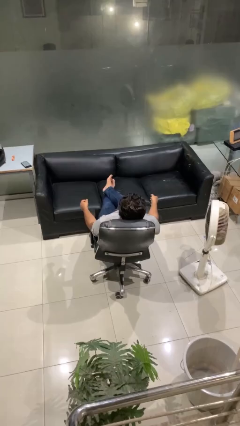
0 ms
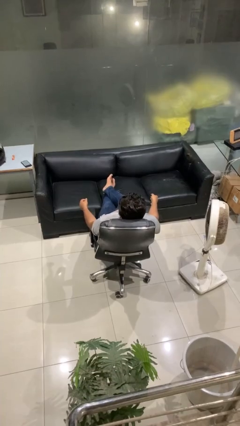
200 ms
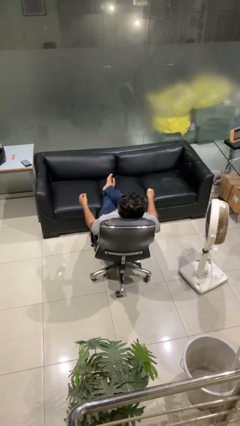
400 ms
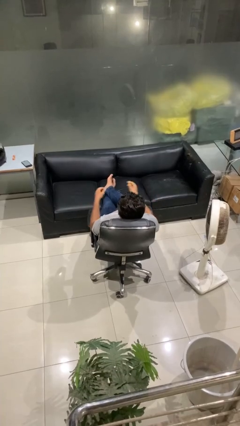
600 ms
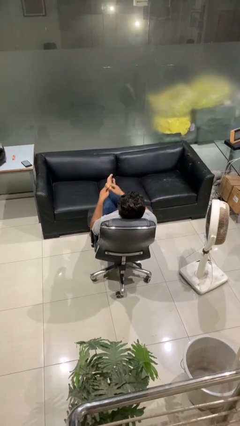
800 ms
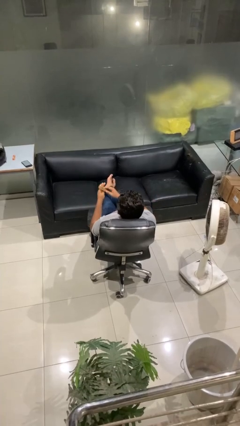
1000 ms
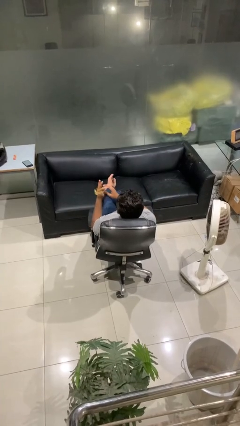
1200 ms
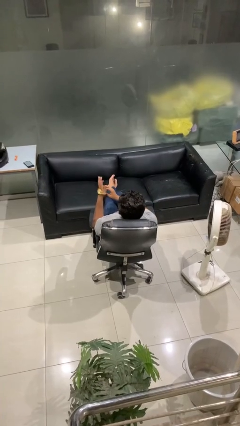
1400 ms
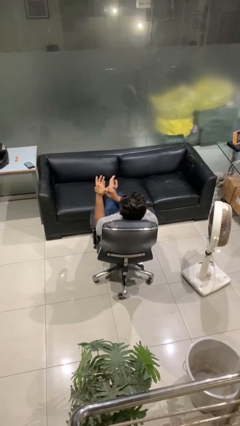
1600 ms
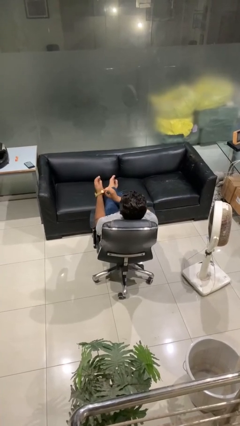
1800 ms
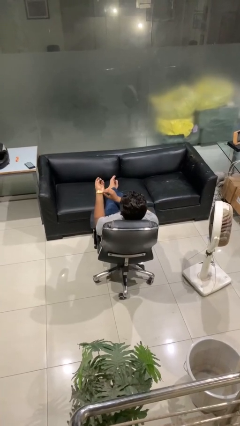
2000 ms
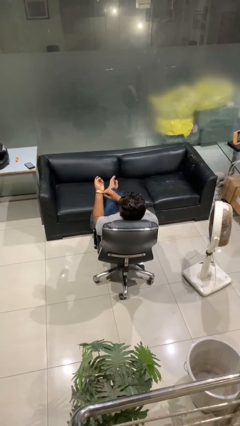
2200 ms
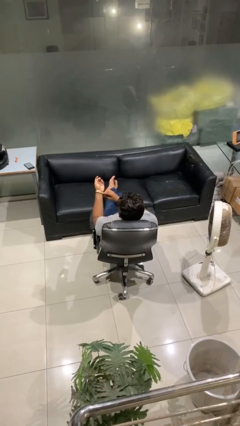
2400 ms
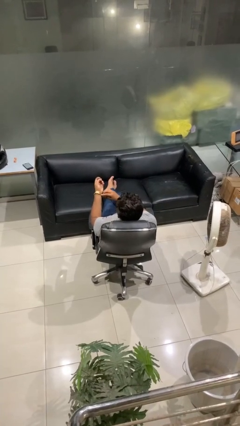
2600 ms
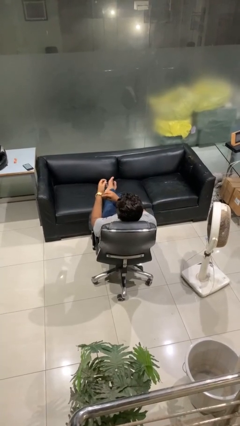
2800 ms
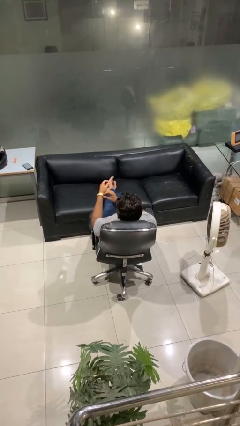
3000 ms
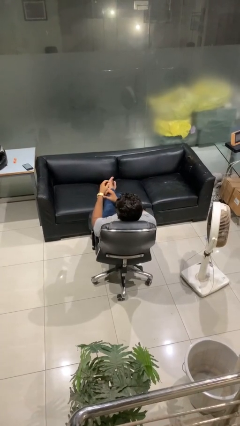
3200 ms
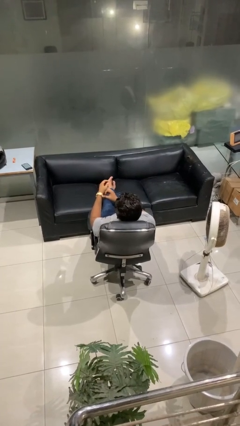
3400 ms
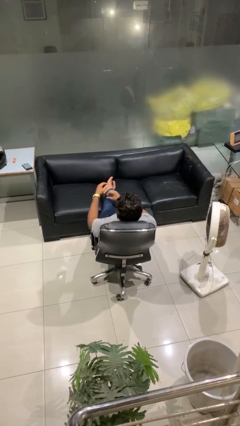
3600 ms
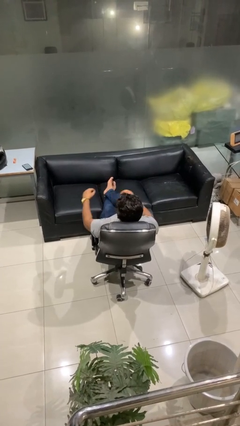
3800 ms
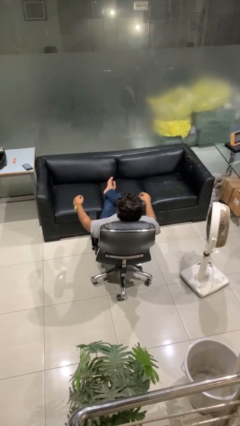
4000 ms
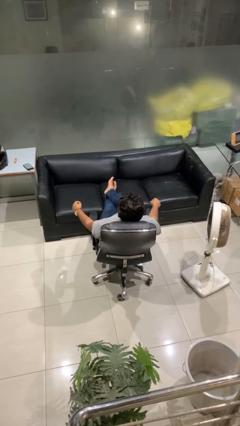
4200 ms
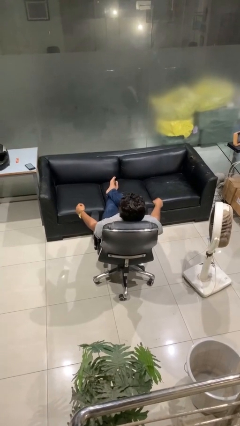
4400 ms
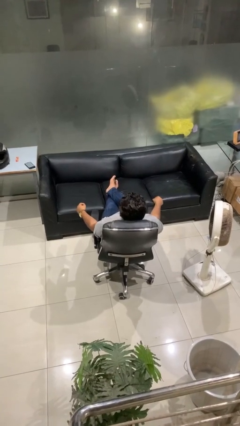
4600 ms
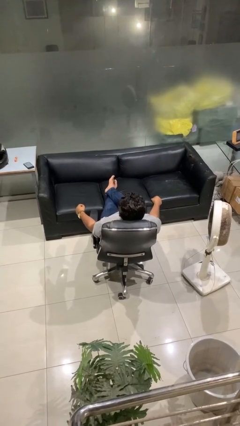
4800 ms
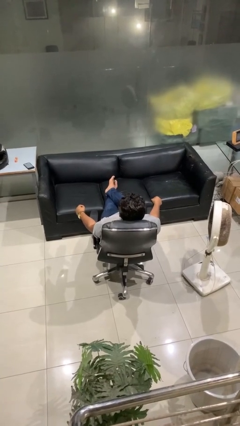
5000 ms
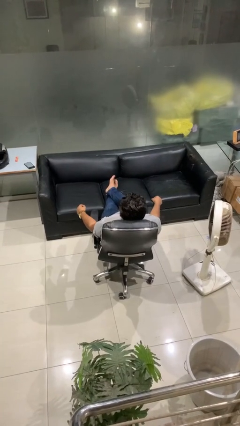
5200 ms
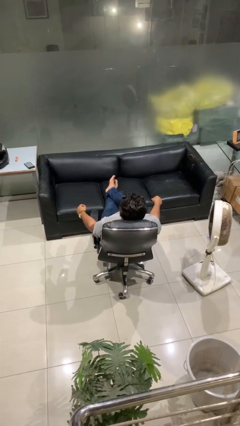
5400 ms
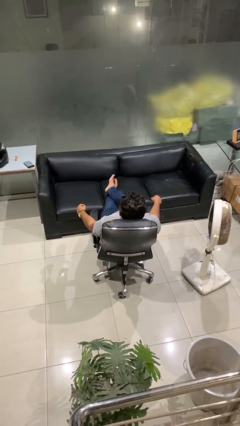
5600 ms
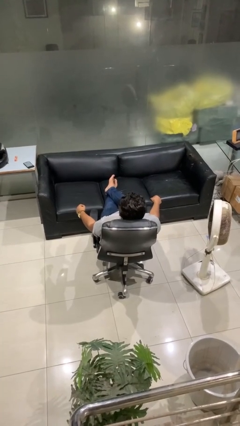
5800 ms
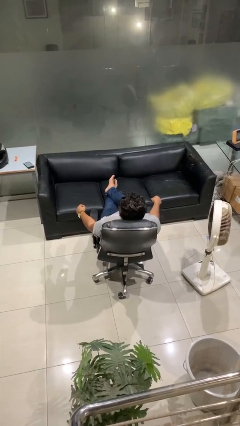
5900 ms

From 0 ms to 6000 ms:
person puts on wristwatch

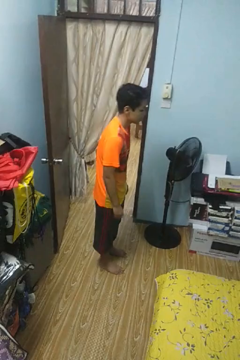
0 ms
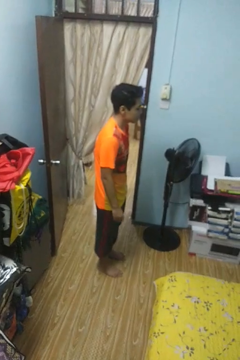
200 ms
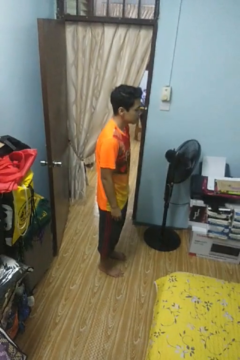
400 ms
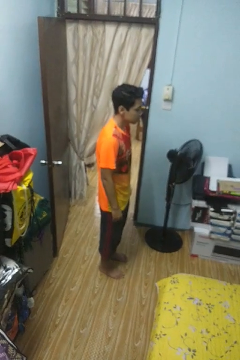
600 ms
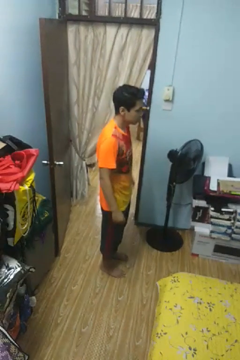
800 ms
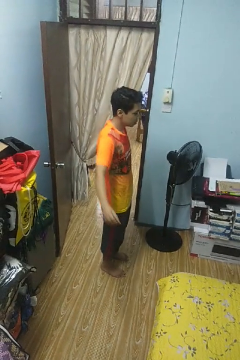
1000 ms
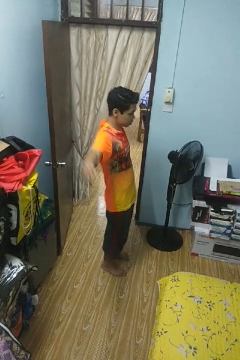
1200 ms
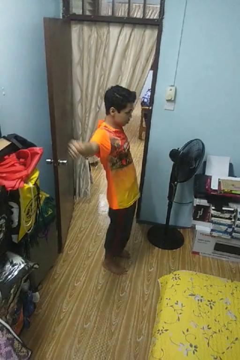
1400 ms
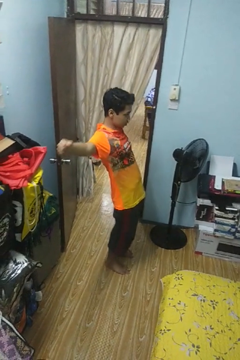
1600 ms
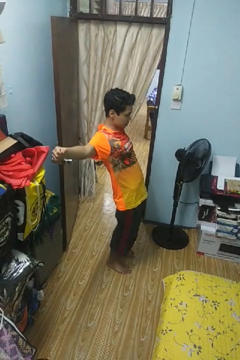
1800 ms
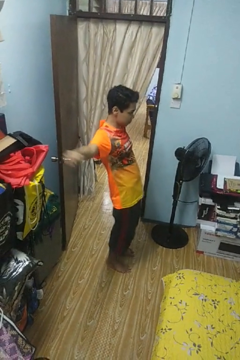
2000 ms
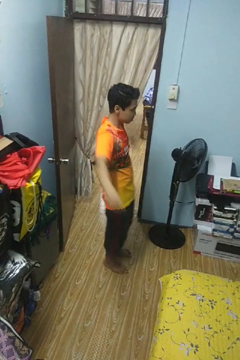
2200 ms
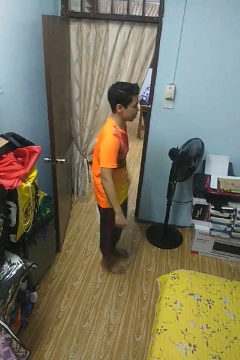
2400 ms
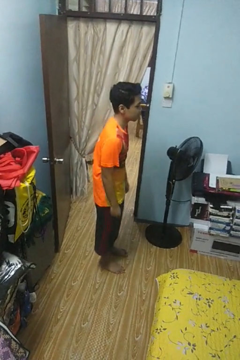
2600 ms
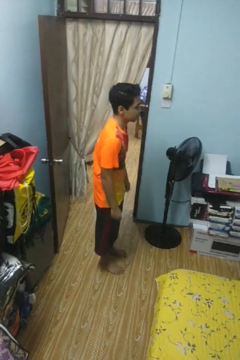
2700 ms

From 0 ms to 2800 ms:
person stretches arms to side

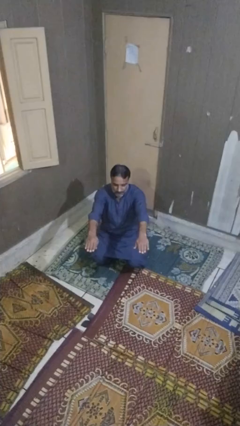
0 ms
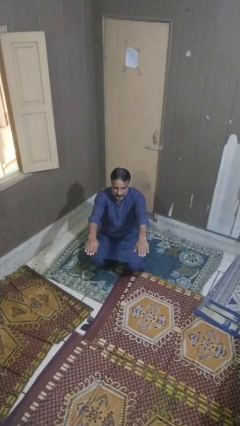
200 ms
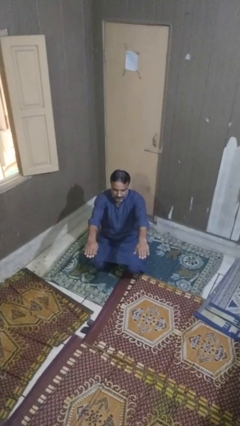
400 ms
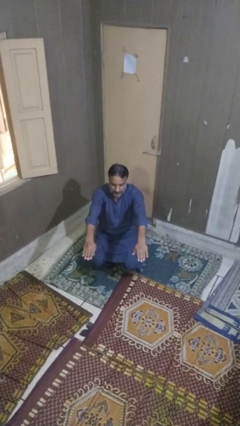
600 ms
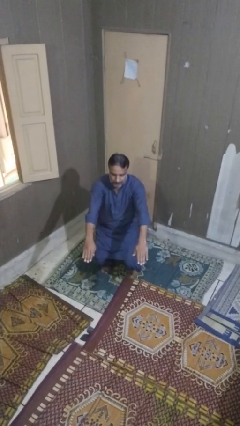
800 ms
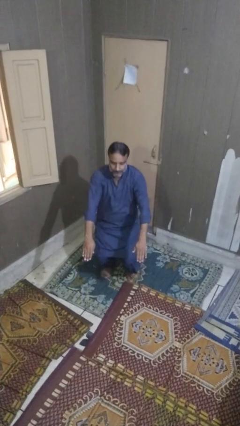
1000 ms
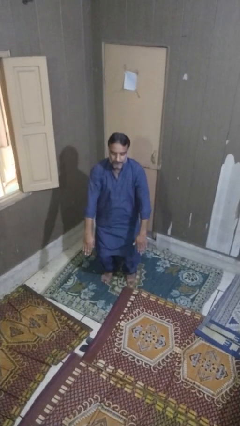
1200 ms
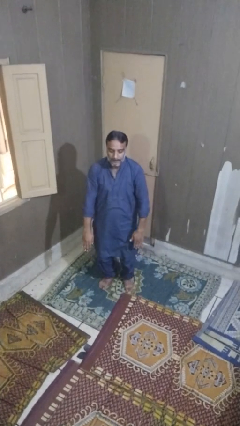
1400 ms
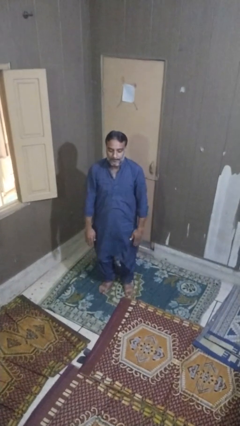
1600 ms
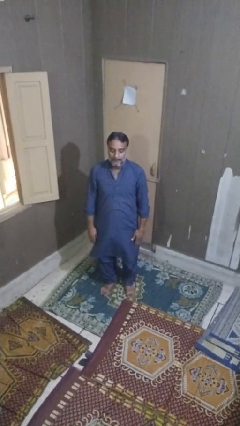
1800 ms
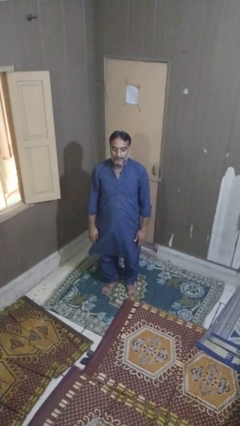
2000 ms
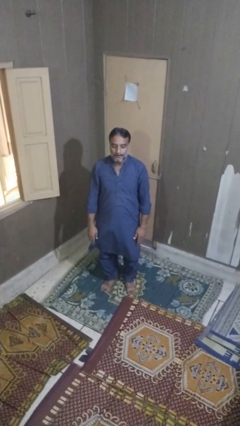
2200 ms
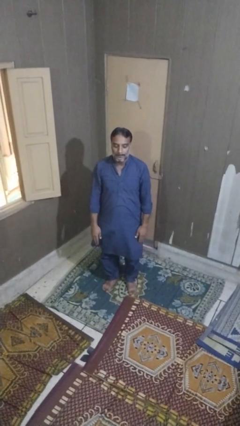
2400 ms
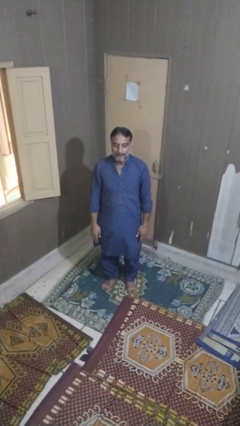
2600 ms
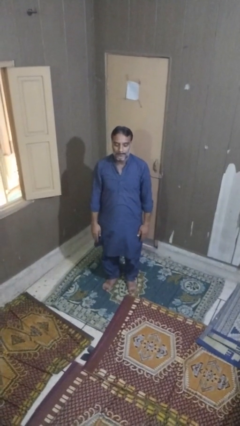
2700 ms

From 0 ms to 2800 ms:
person stands up

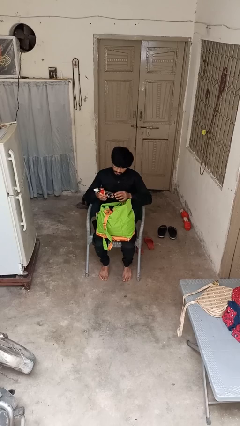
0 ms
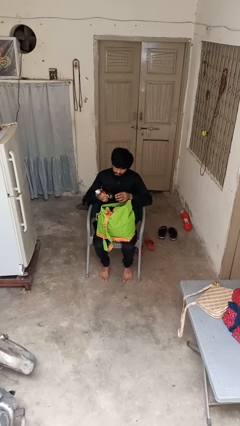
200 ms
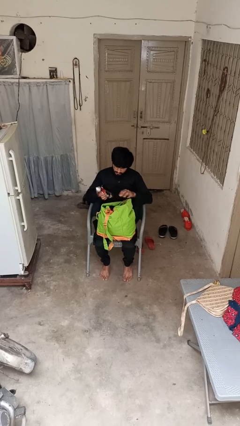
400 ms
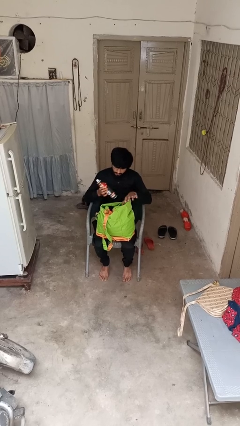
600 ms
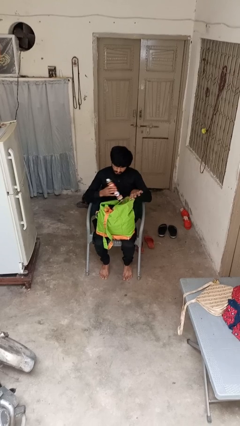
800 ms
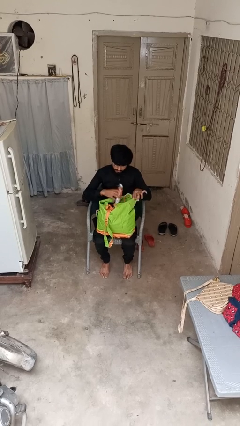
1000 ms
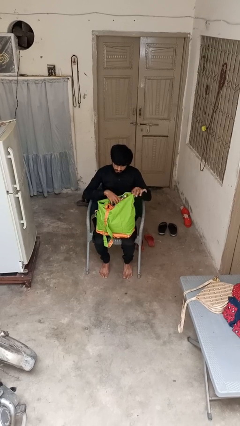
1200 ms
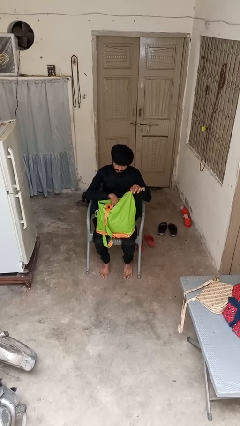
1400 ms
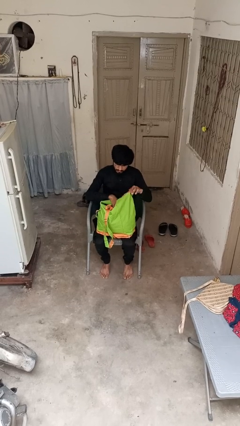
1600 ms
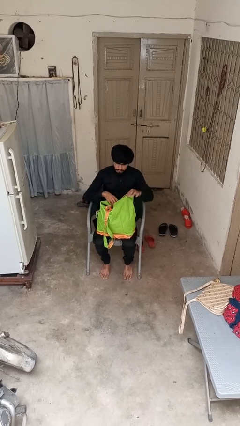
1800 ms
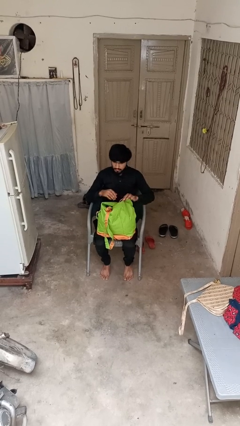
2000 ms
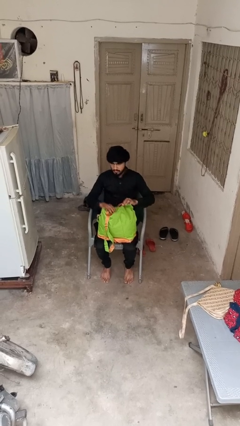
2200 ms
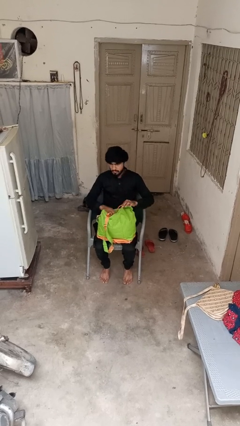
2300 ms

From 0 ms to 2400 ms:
person puts object into backpack

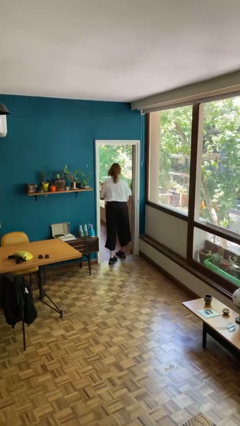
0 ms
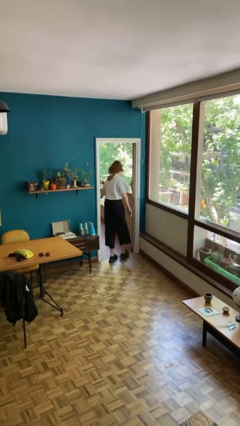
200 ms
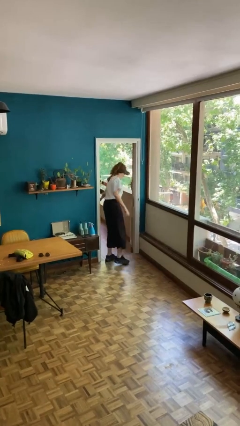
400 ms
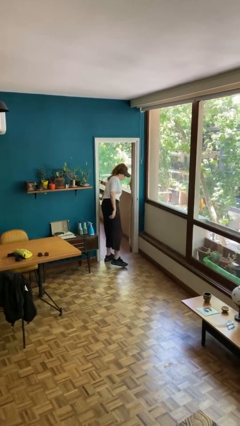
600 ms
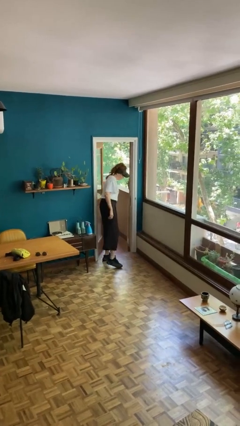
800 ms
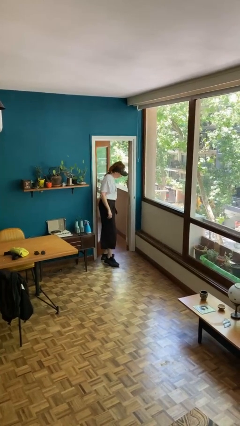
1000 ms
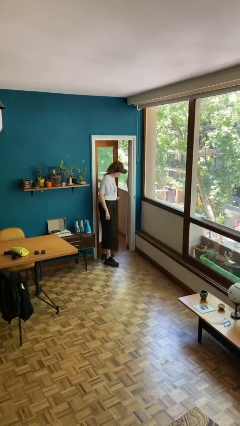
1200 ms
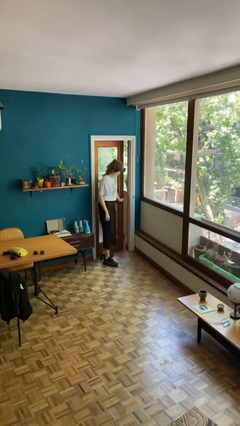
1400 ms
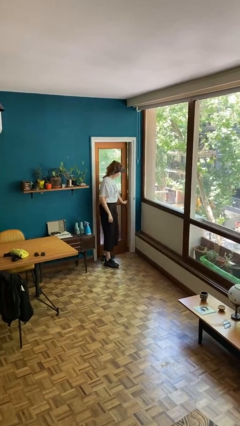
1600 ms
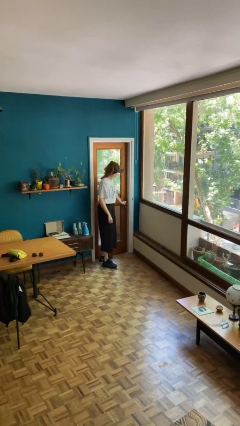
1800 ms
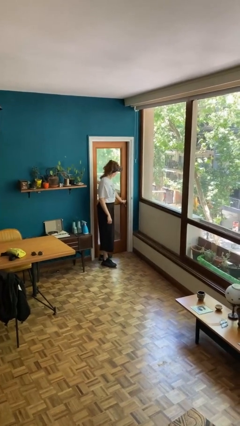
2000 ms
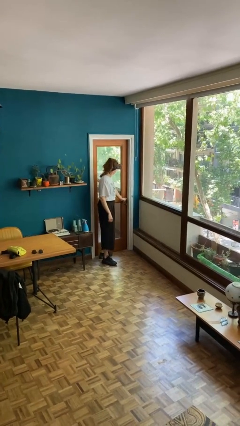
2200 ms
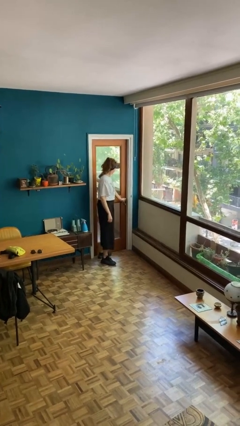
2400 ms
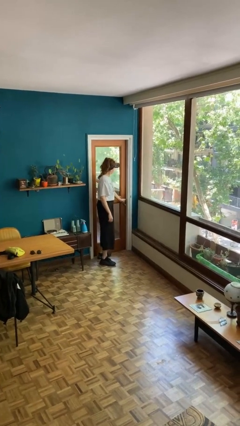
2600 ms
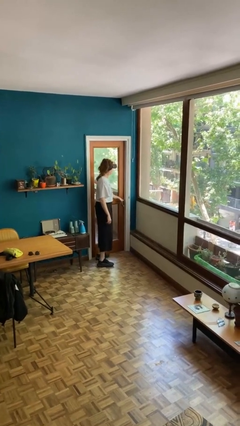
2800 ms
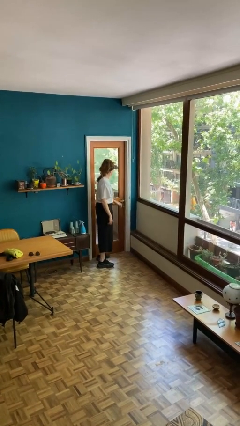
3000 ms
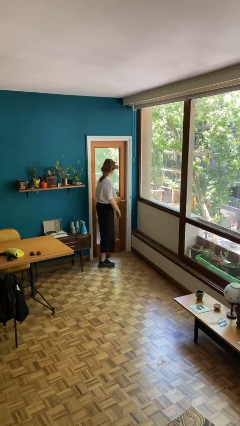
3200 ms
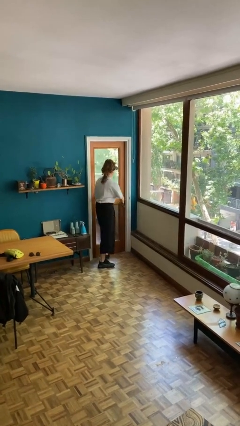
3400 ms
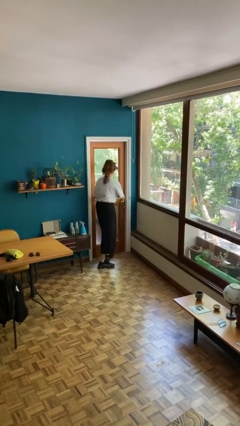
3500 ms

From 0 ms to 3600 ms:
person closes facility door

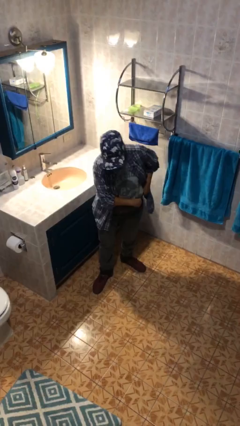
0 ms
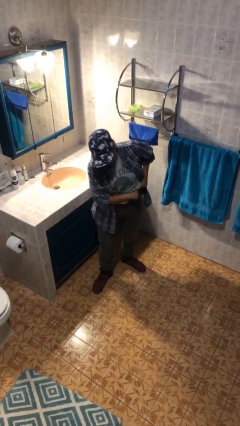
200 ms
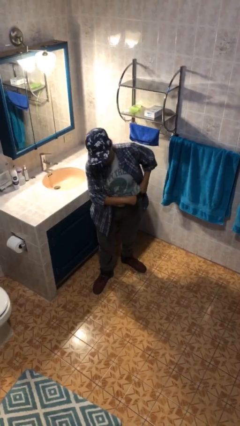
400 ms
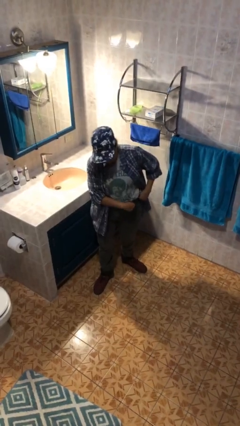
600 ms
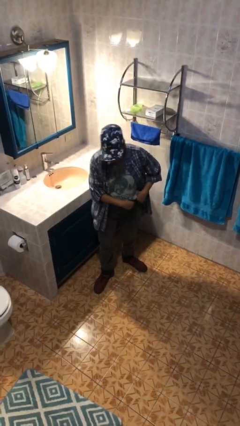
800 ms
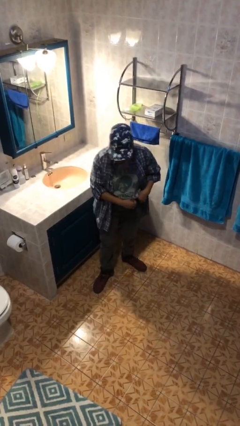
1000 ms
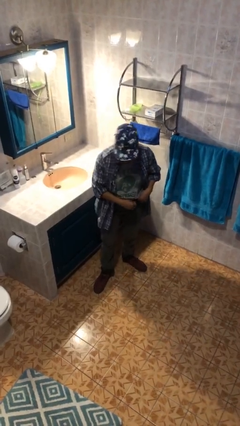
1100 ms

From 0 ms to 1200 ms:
person hikes up pants
